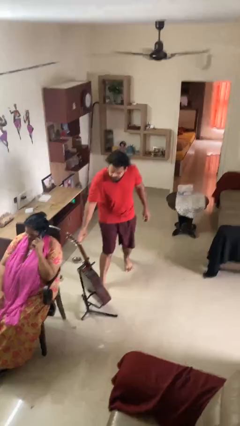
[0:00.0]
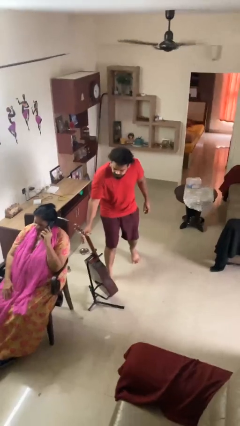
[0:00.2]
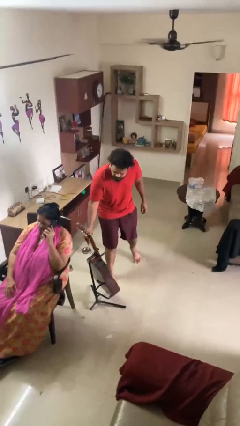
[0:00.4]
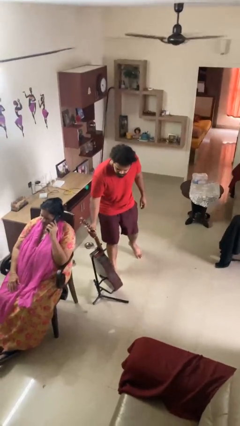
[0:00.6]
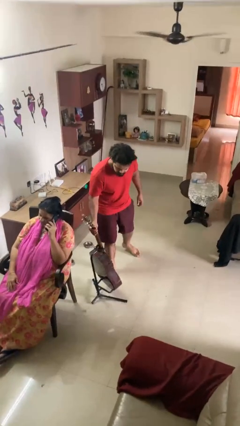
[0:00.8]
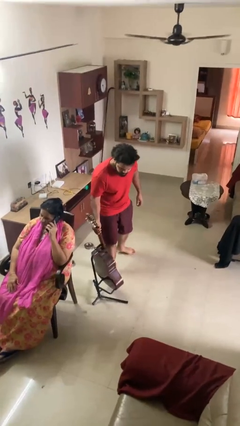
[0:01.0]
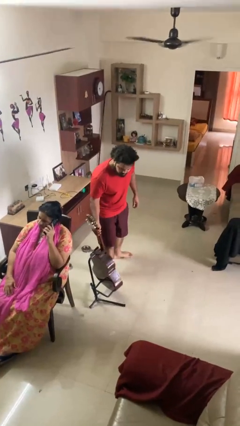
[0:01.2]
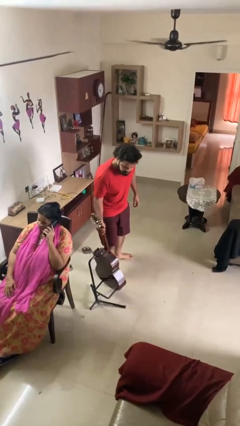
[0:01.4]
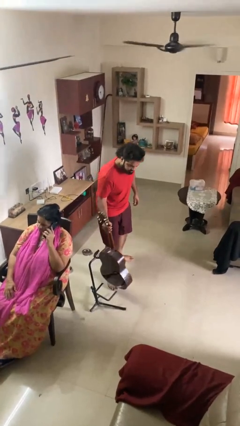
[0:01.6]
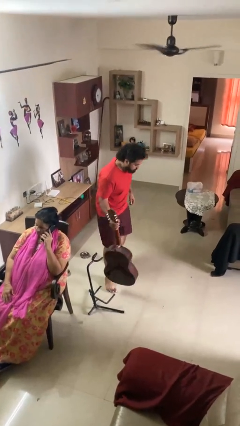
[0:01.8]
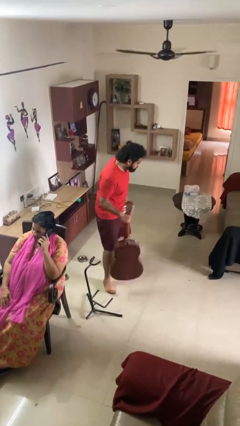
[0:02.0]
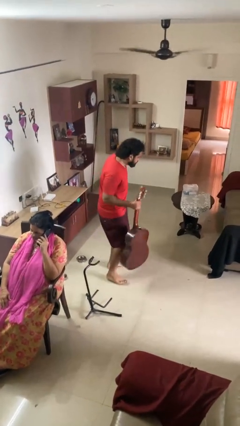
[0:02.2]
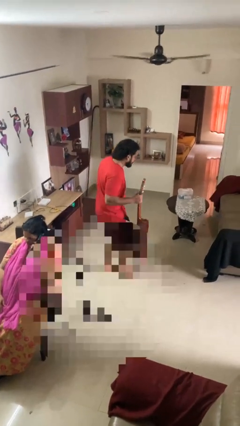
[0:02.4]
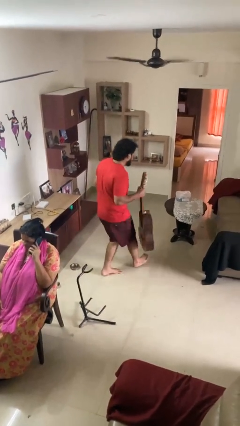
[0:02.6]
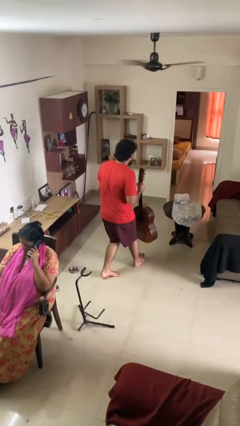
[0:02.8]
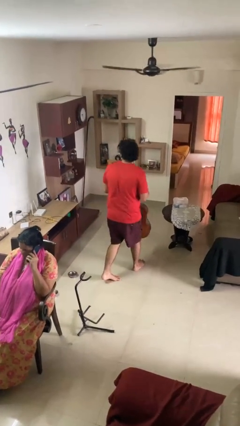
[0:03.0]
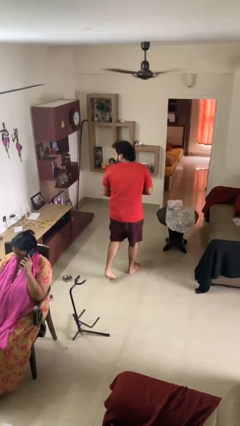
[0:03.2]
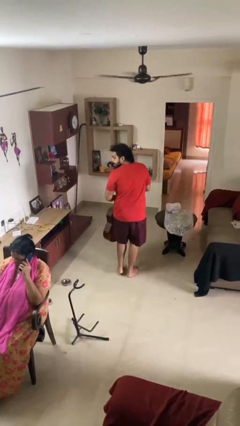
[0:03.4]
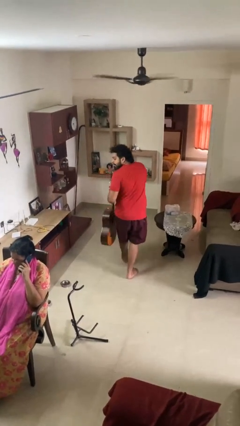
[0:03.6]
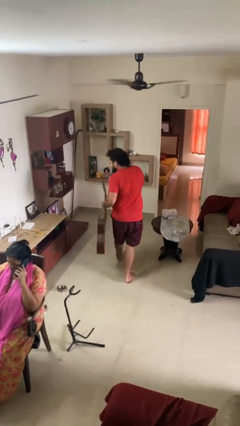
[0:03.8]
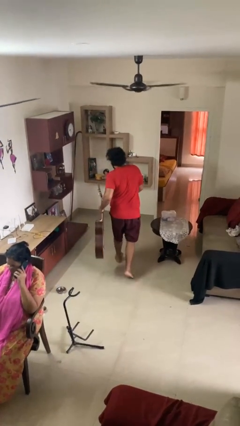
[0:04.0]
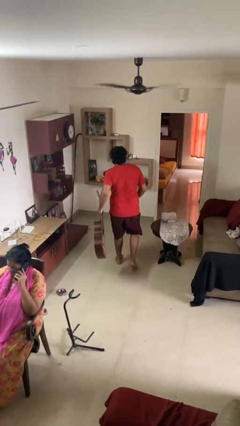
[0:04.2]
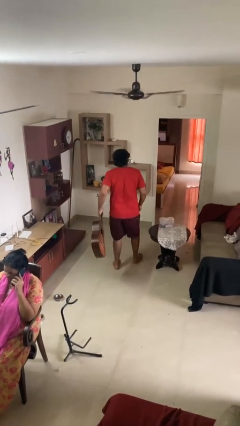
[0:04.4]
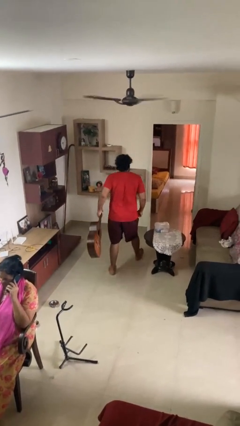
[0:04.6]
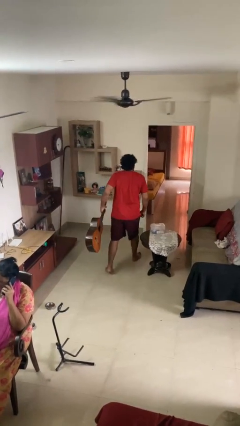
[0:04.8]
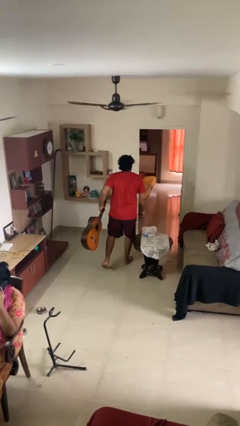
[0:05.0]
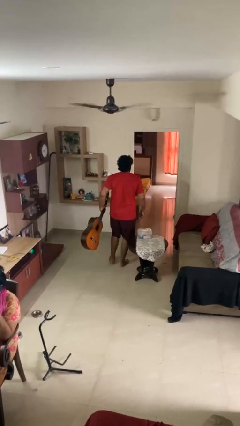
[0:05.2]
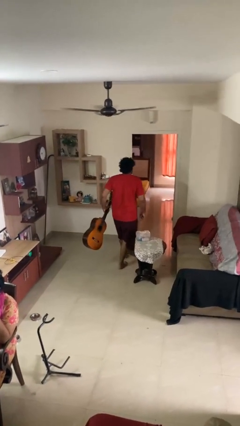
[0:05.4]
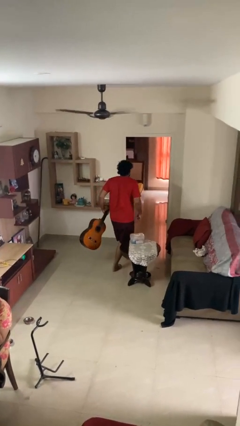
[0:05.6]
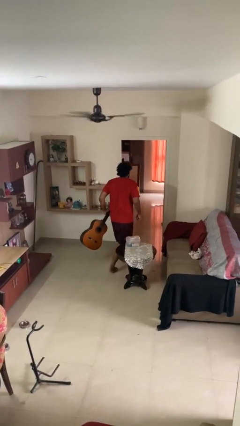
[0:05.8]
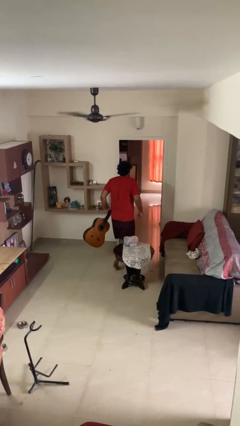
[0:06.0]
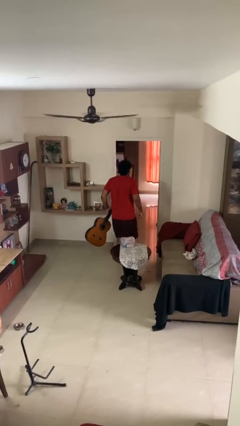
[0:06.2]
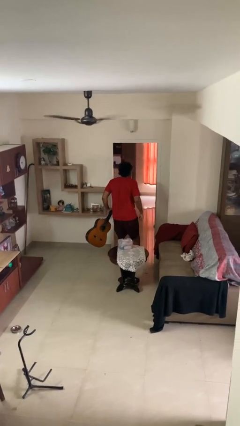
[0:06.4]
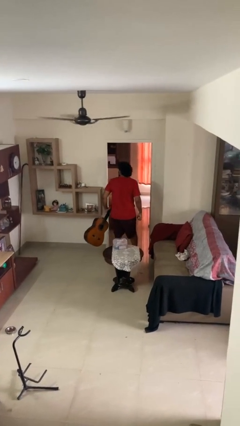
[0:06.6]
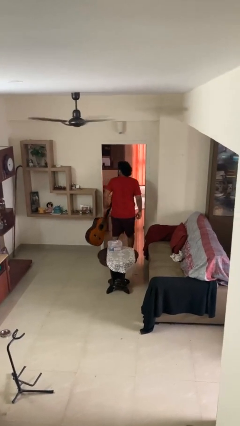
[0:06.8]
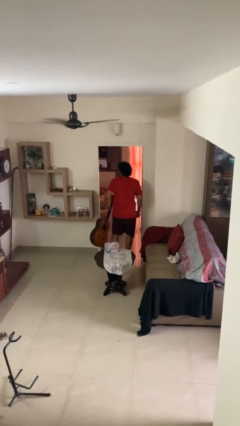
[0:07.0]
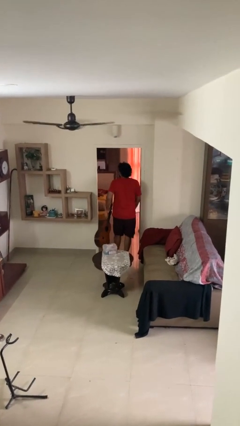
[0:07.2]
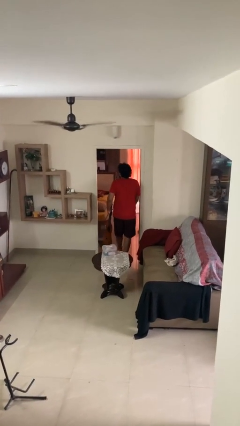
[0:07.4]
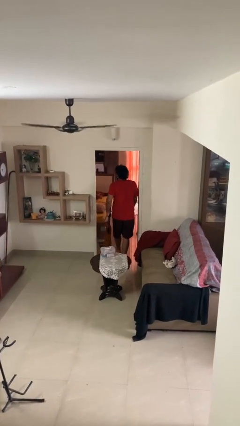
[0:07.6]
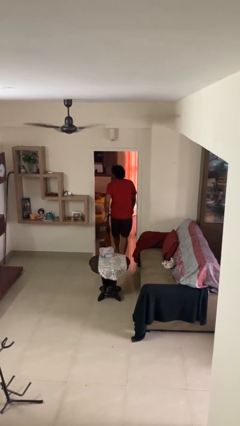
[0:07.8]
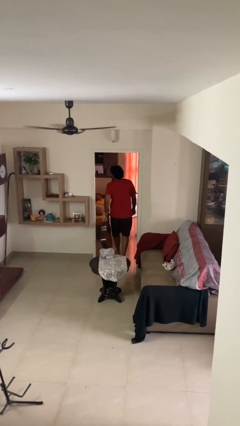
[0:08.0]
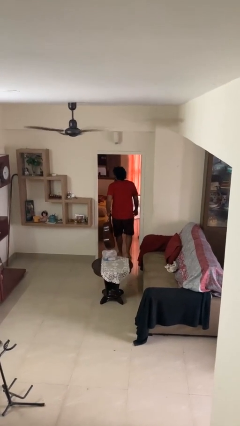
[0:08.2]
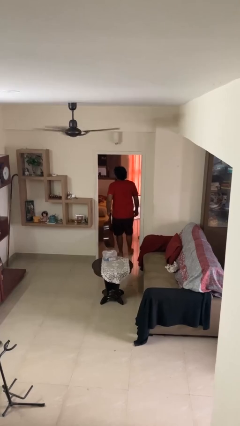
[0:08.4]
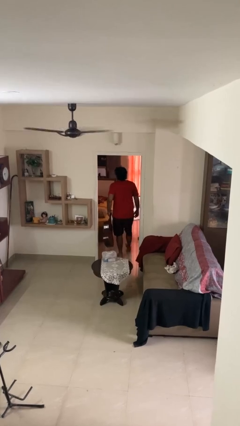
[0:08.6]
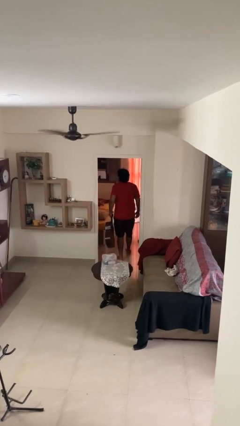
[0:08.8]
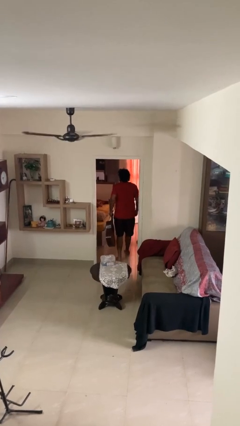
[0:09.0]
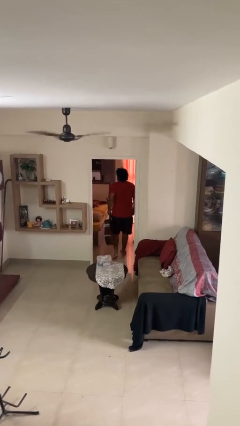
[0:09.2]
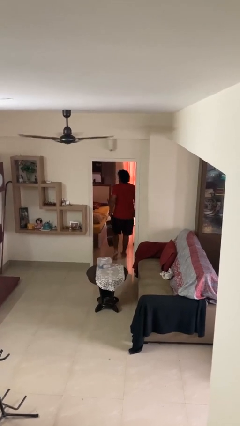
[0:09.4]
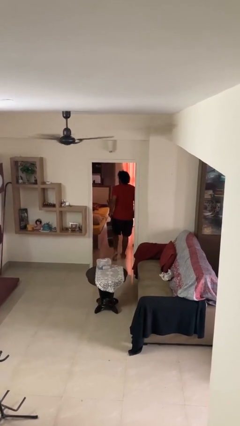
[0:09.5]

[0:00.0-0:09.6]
person steals object from person

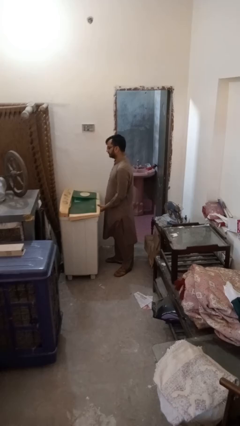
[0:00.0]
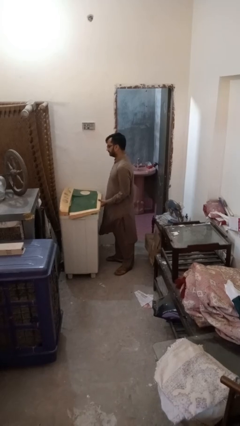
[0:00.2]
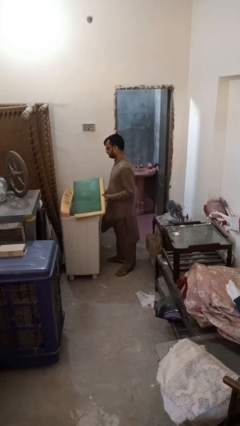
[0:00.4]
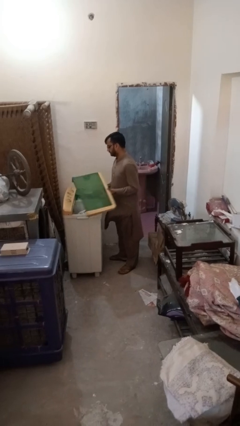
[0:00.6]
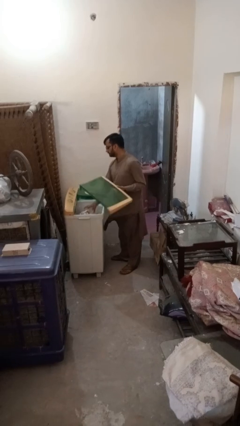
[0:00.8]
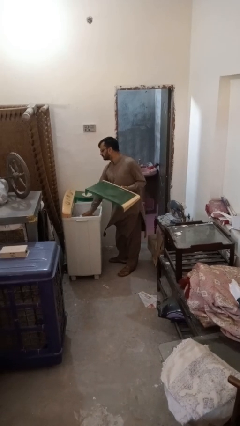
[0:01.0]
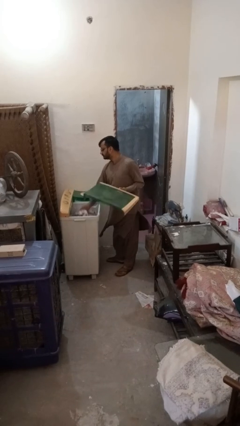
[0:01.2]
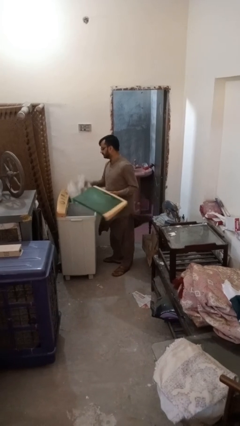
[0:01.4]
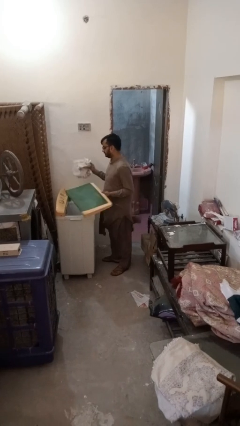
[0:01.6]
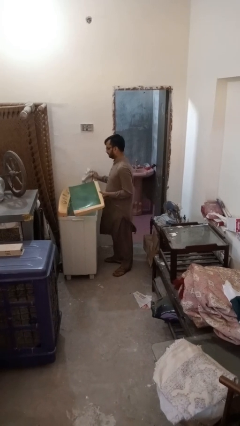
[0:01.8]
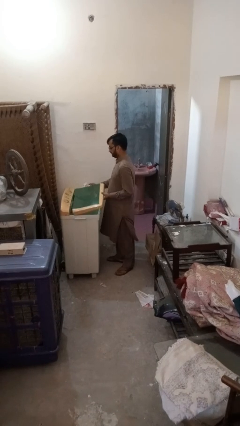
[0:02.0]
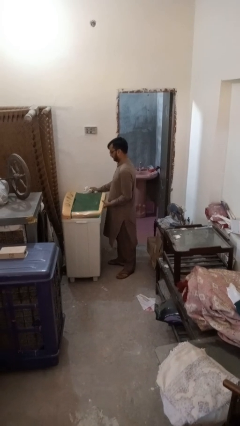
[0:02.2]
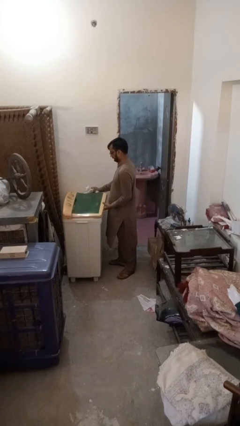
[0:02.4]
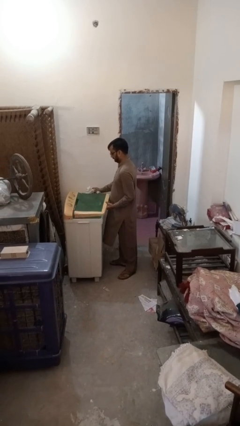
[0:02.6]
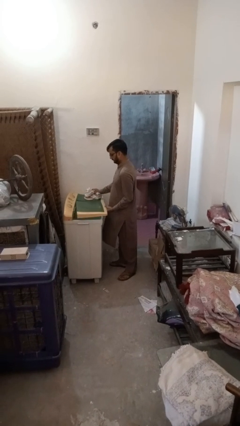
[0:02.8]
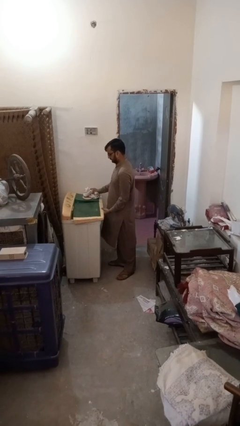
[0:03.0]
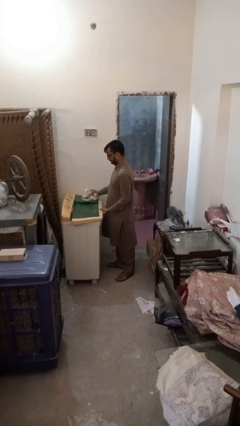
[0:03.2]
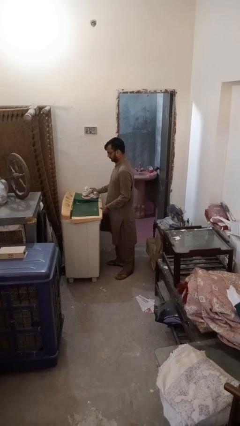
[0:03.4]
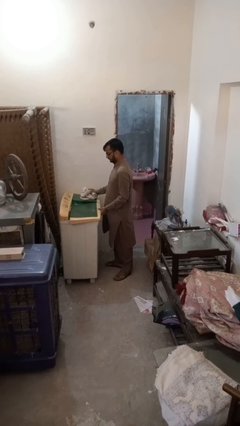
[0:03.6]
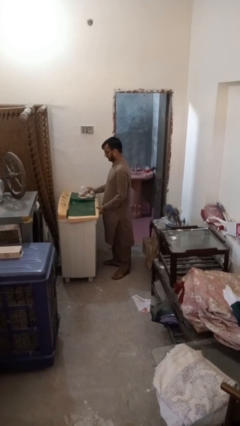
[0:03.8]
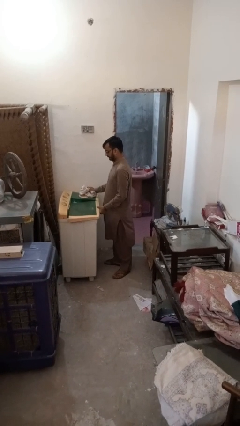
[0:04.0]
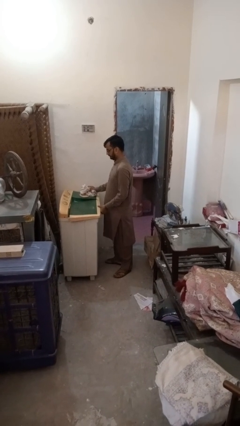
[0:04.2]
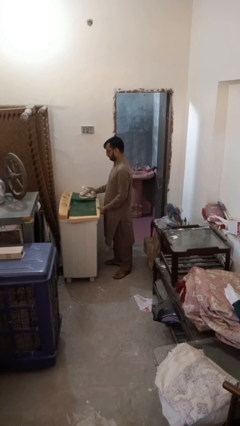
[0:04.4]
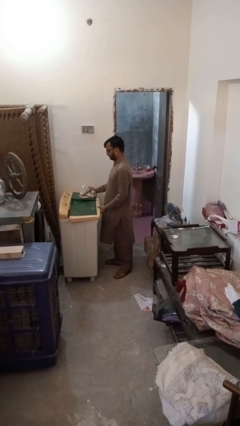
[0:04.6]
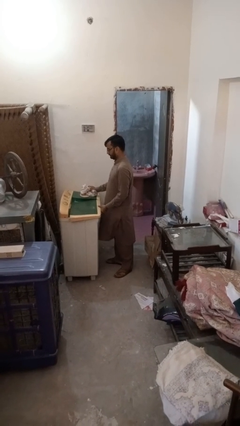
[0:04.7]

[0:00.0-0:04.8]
person unloads clotheswasher

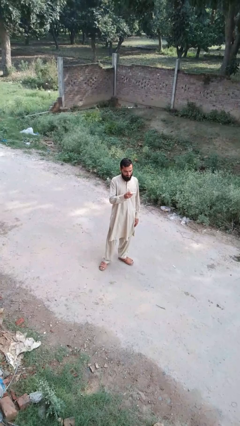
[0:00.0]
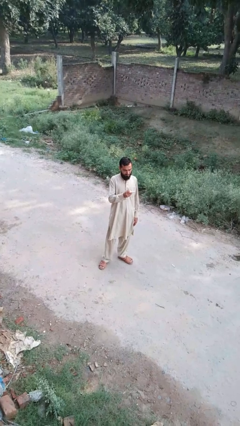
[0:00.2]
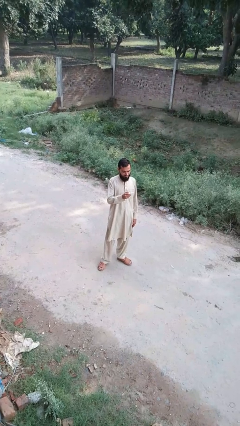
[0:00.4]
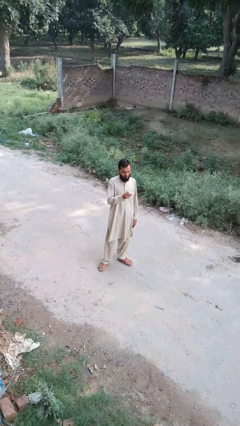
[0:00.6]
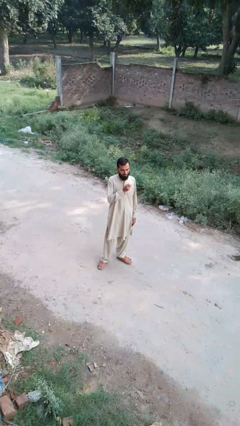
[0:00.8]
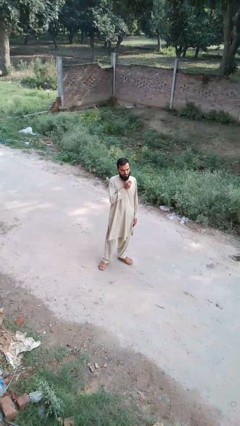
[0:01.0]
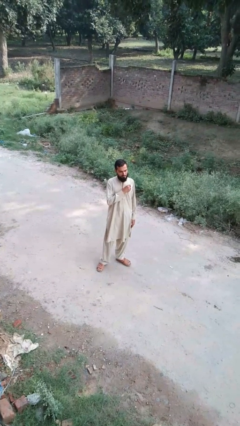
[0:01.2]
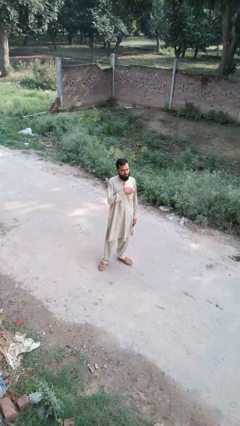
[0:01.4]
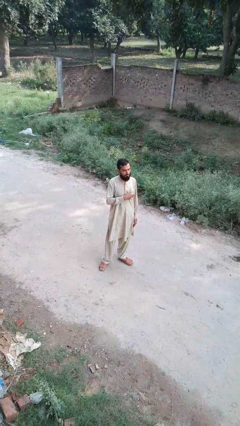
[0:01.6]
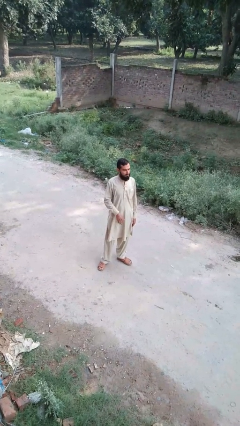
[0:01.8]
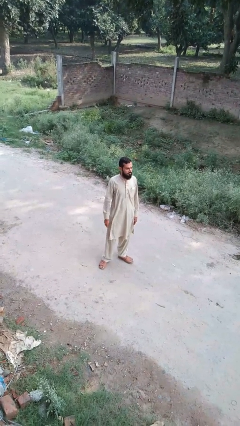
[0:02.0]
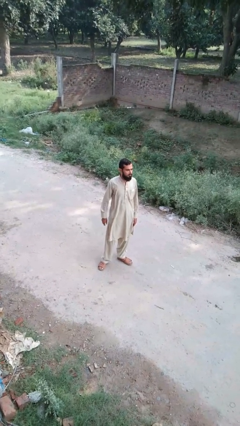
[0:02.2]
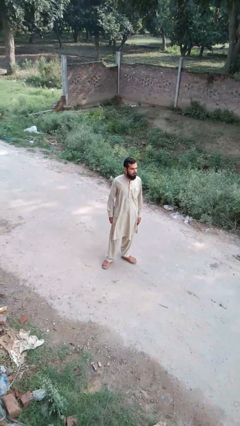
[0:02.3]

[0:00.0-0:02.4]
person puts phone into pocket

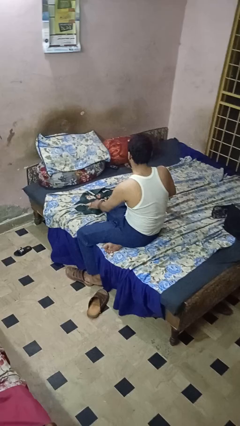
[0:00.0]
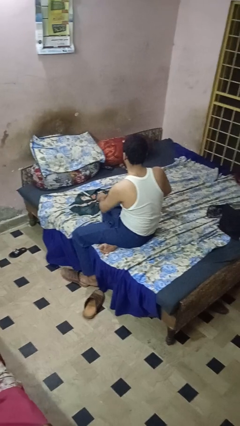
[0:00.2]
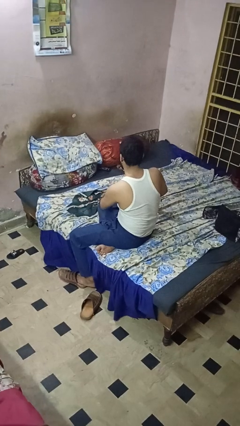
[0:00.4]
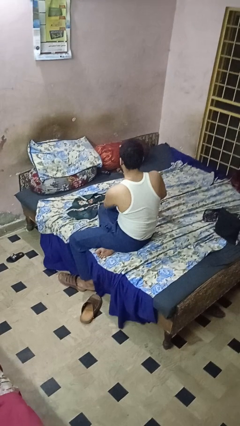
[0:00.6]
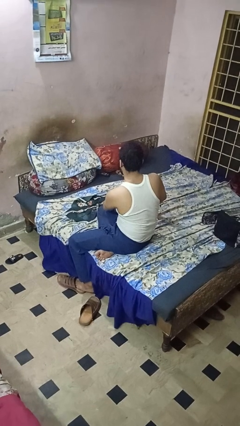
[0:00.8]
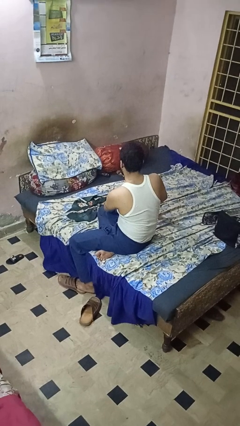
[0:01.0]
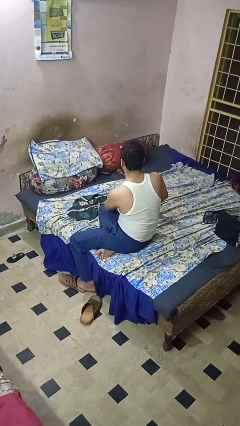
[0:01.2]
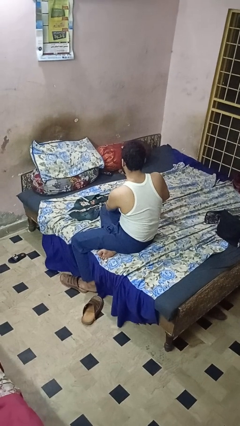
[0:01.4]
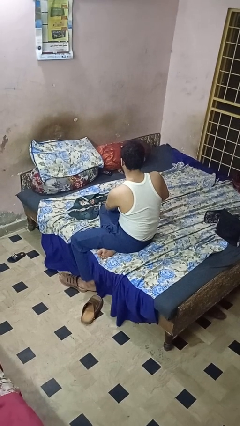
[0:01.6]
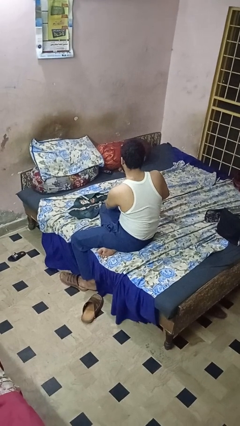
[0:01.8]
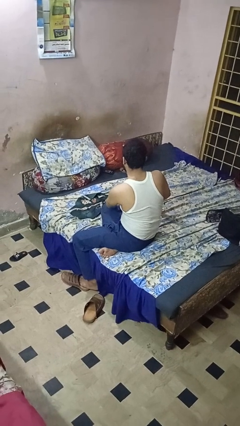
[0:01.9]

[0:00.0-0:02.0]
person irons clothes
